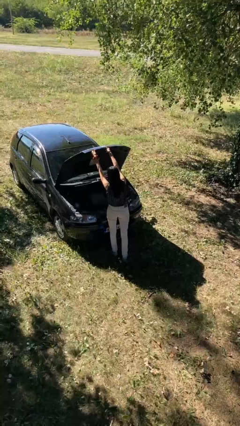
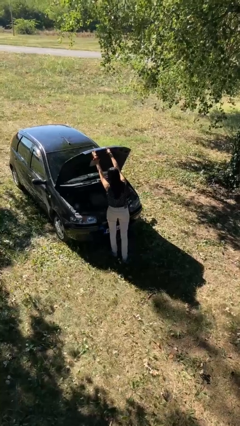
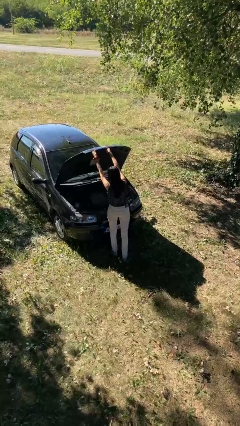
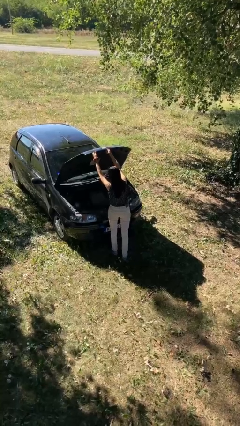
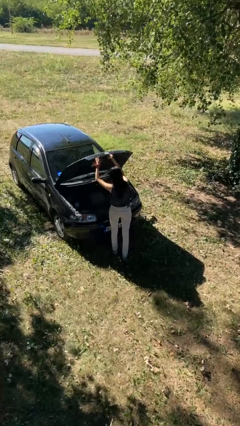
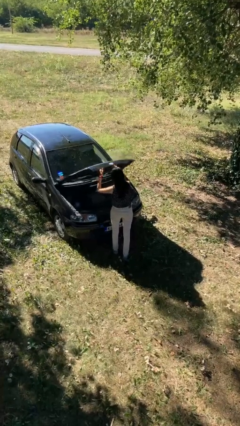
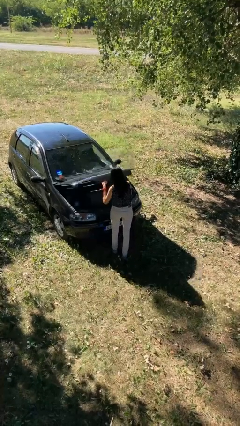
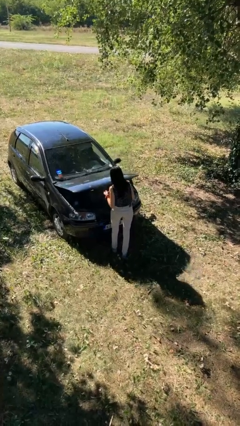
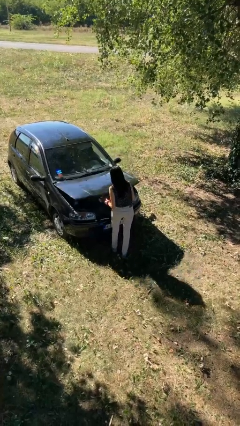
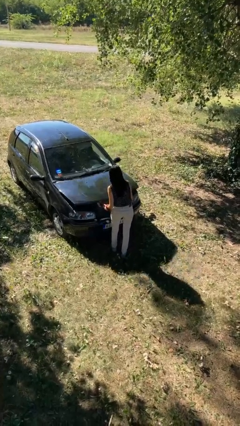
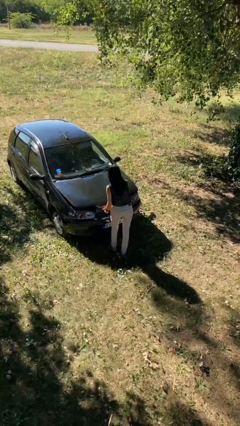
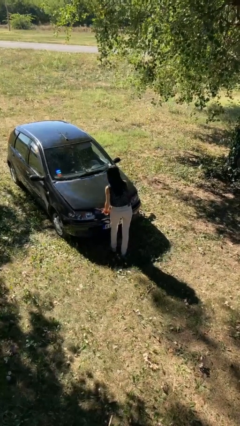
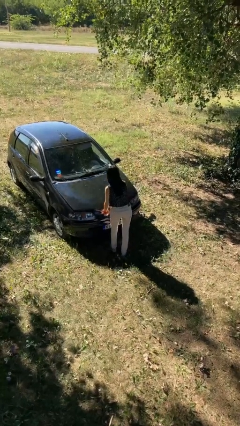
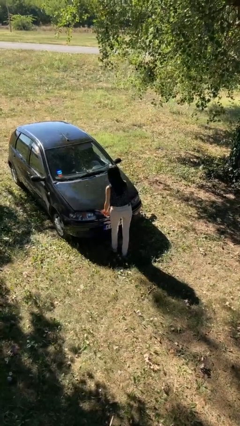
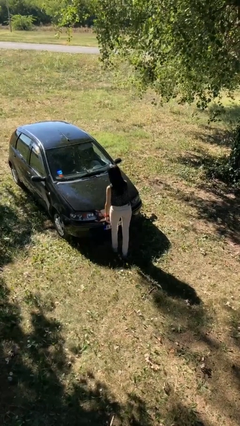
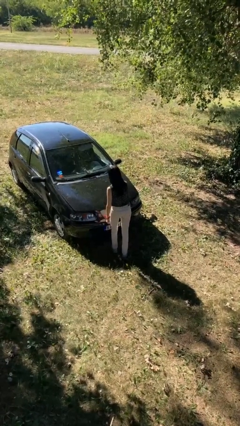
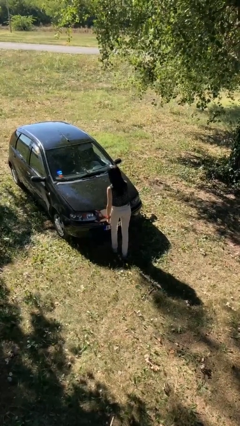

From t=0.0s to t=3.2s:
person closes car hood

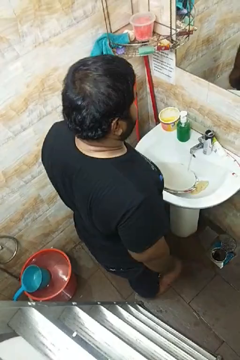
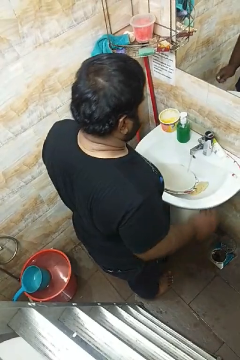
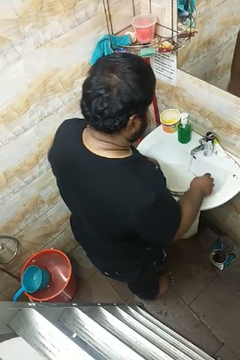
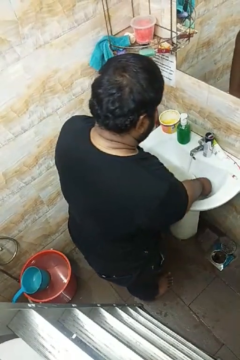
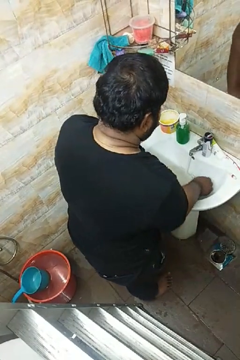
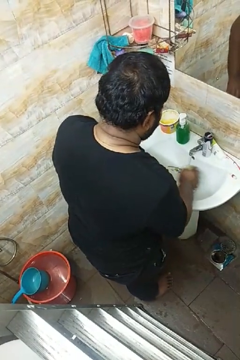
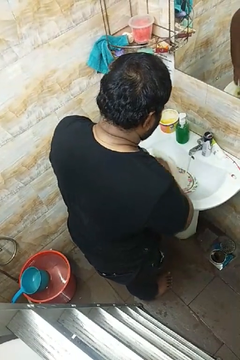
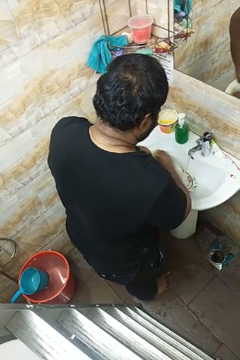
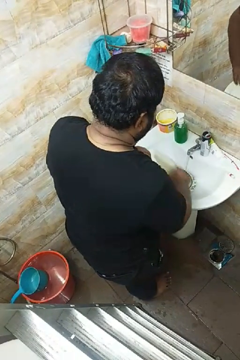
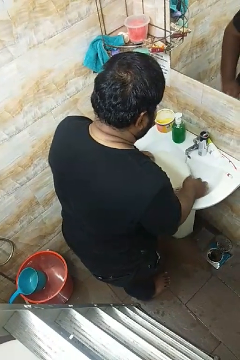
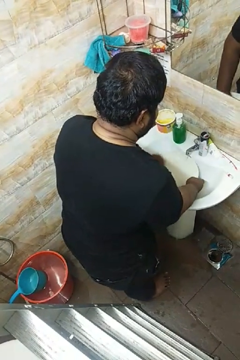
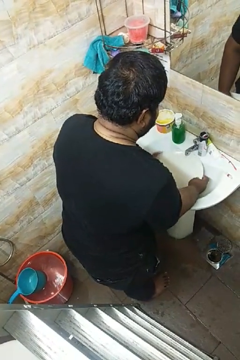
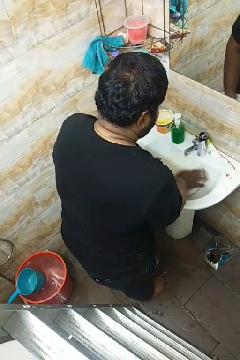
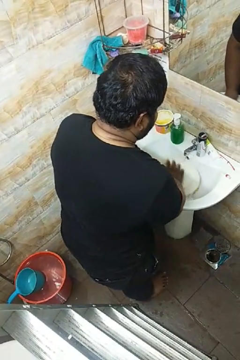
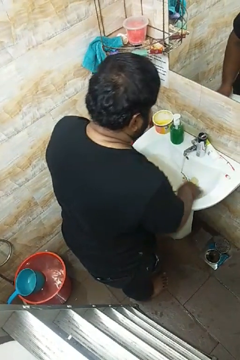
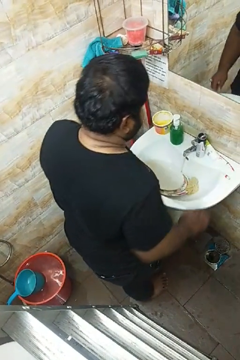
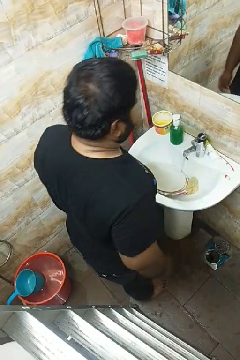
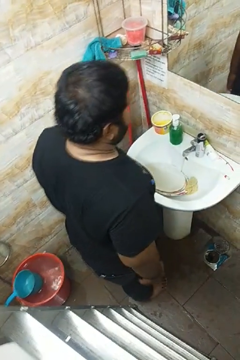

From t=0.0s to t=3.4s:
person washes dish

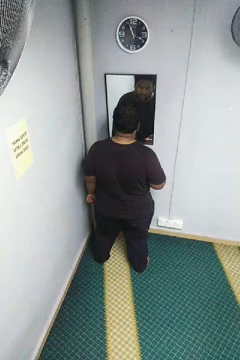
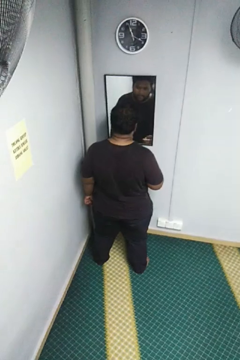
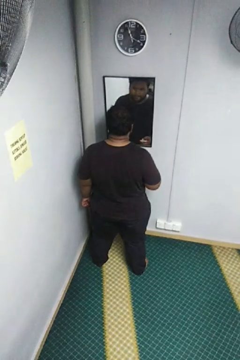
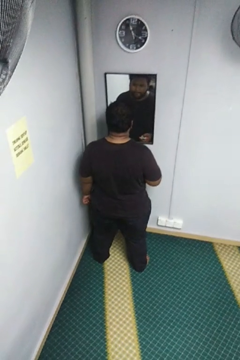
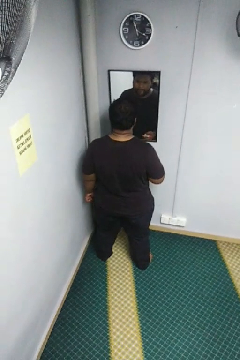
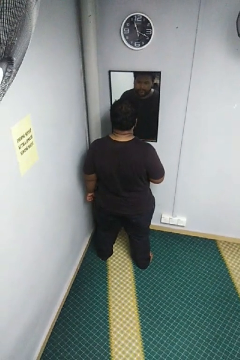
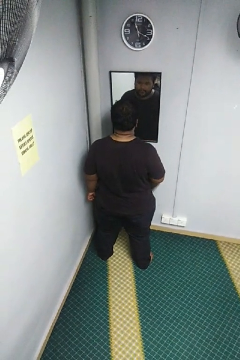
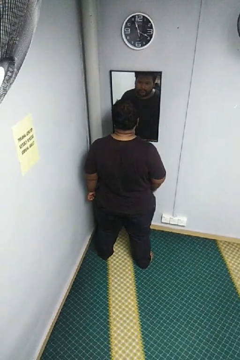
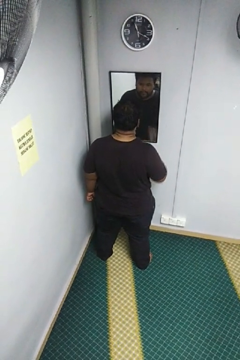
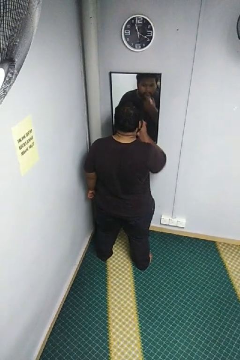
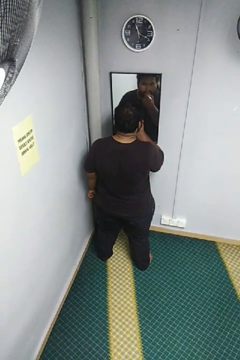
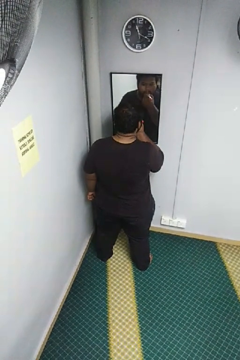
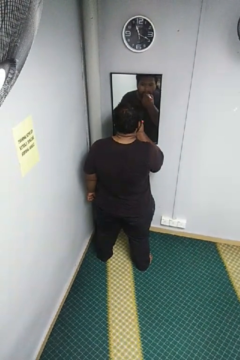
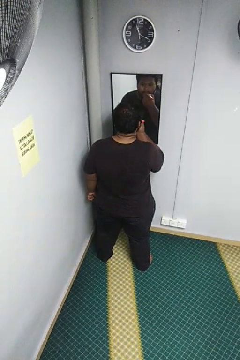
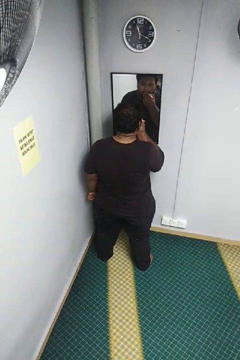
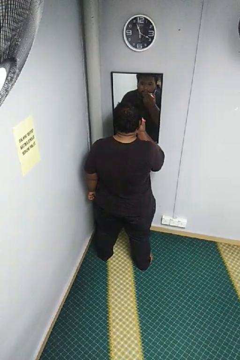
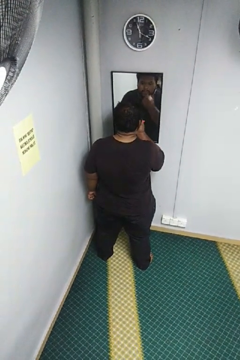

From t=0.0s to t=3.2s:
person applies lip makeup

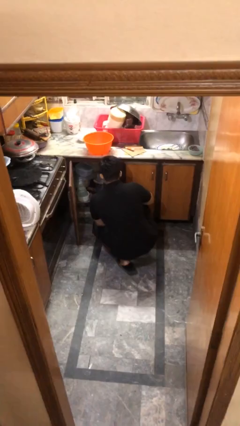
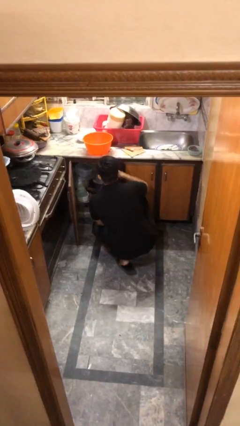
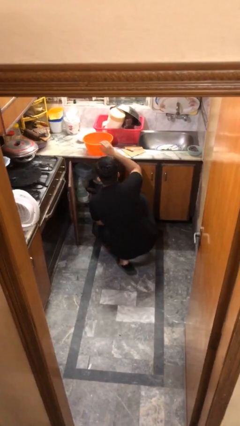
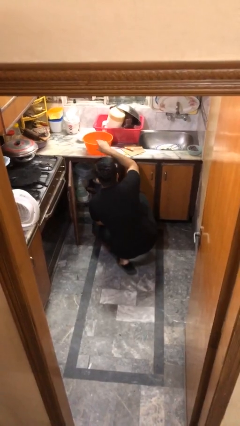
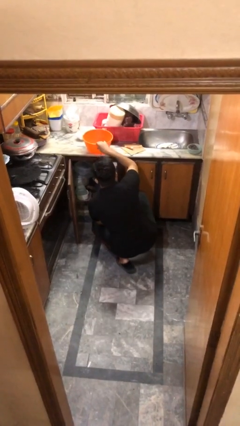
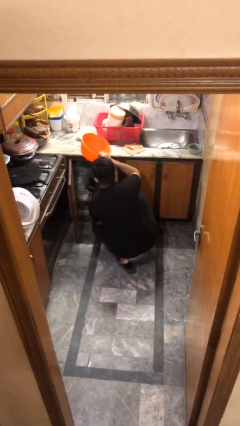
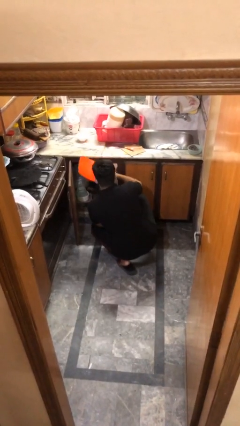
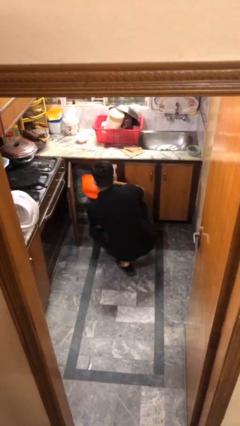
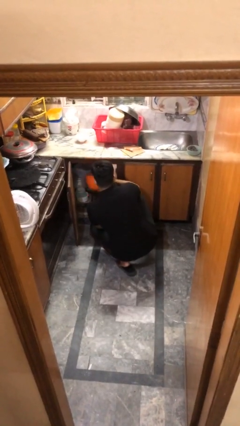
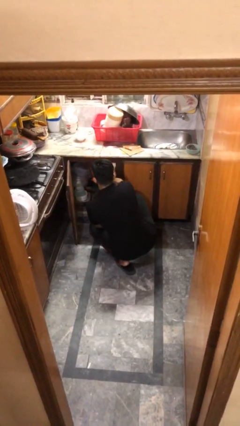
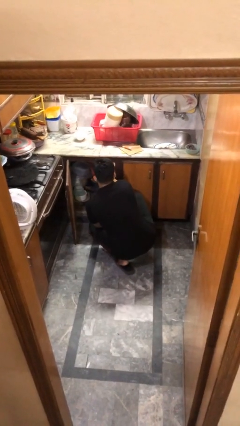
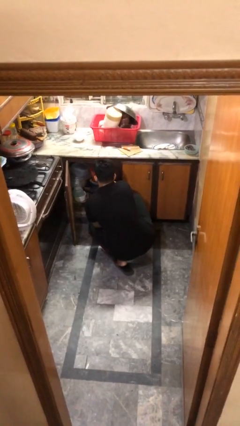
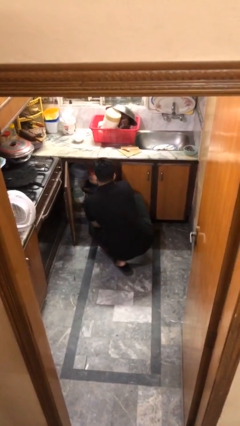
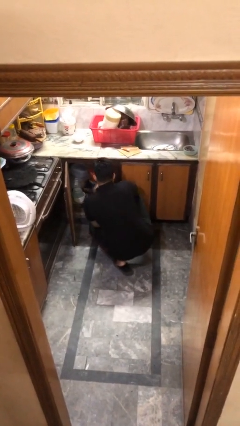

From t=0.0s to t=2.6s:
person puts object into kitchen drawer

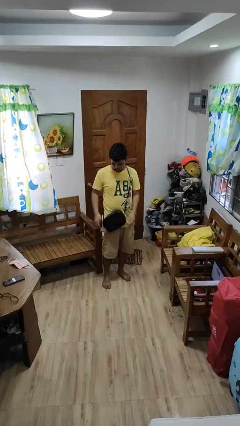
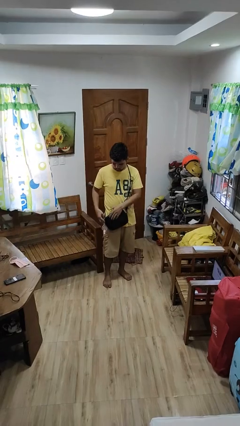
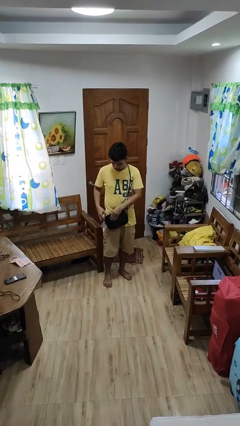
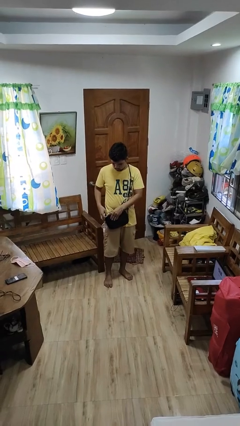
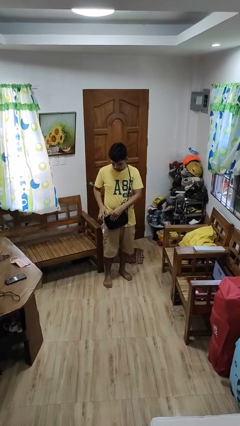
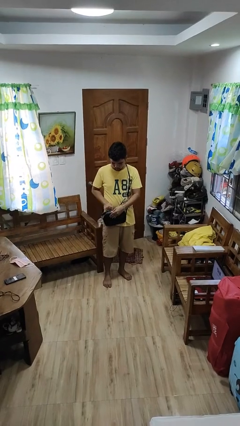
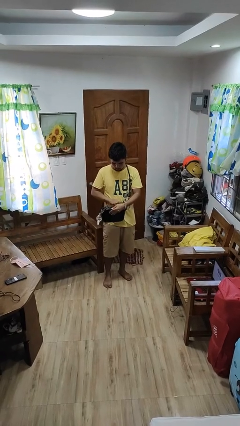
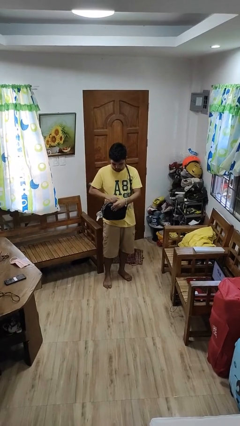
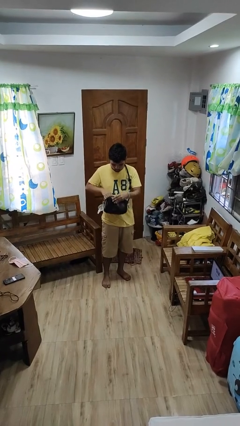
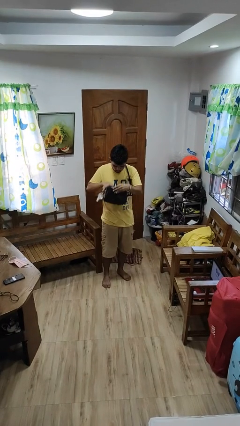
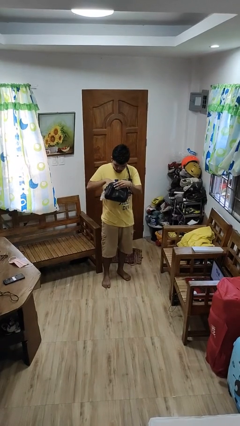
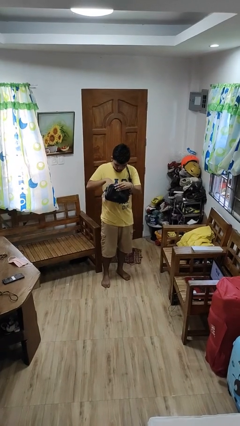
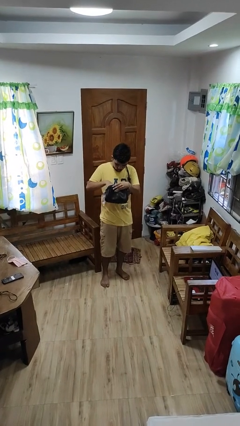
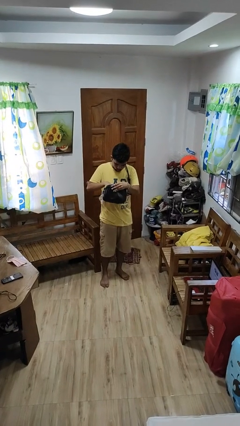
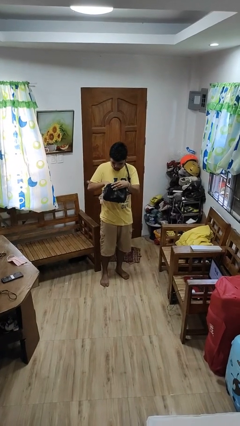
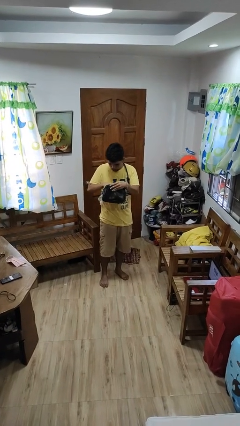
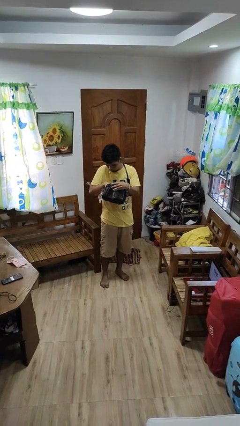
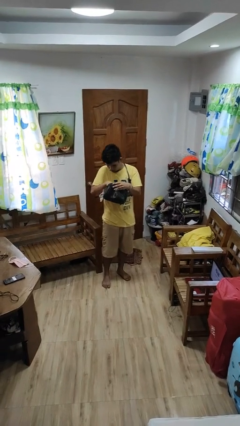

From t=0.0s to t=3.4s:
person searches in purse

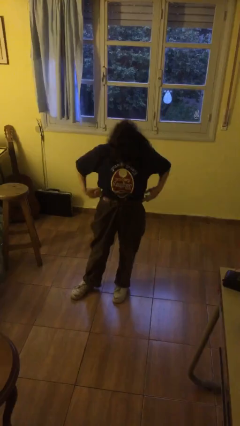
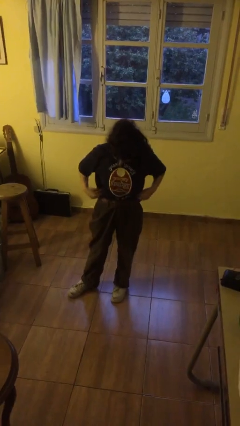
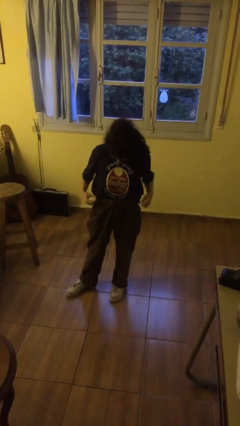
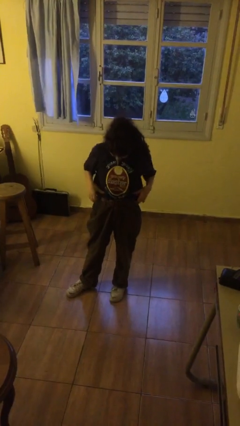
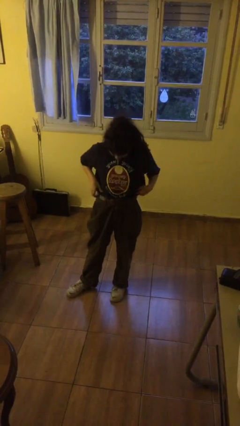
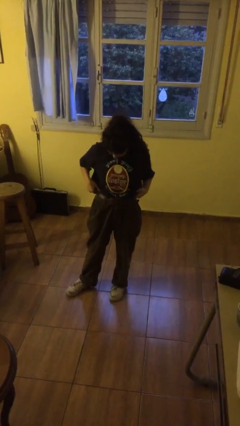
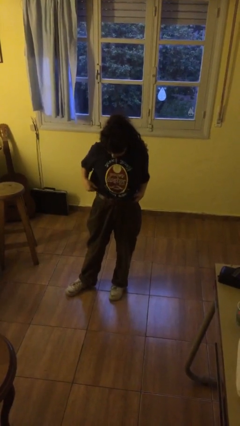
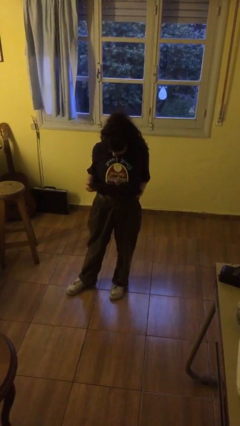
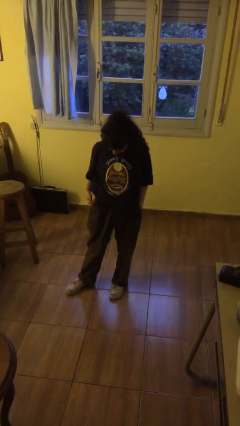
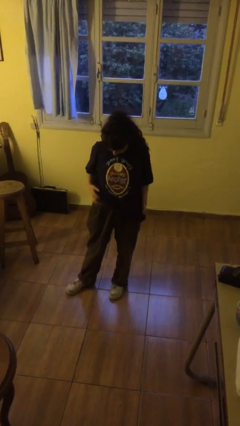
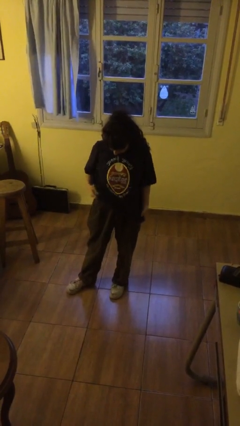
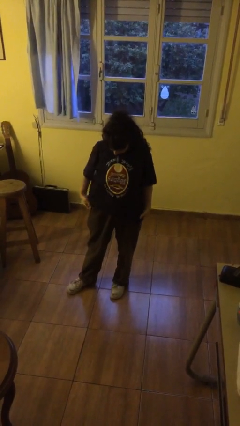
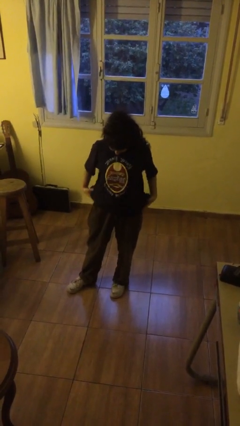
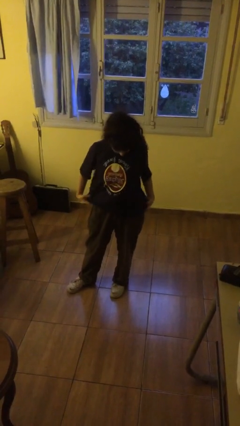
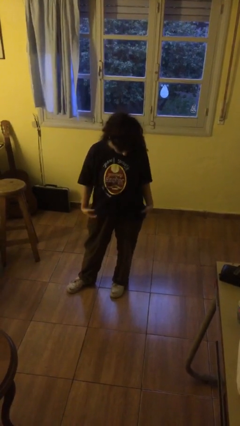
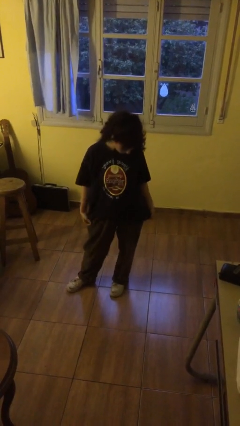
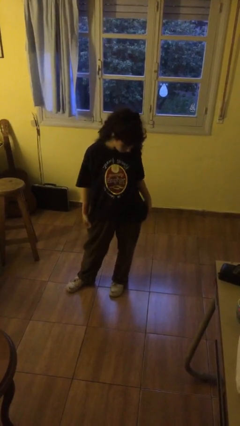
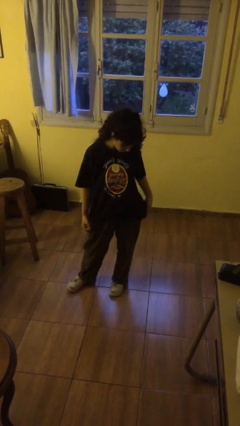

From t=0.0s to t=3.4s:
person untucks shirt
